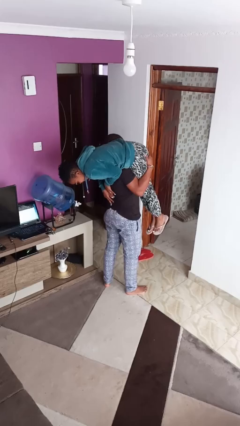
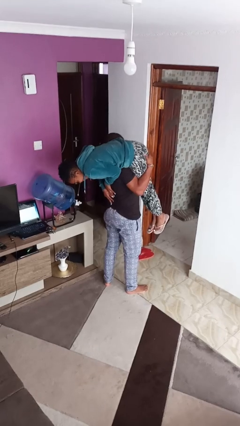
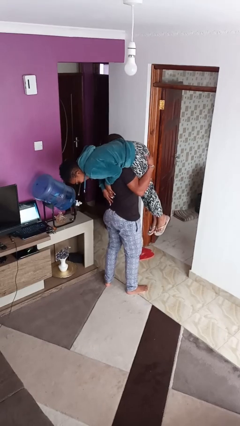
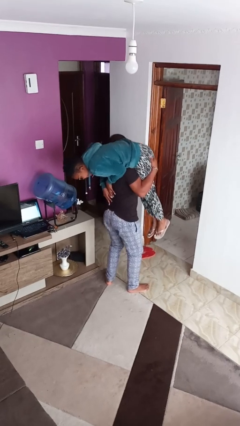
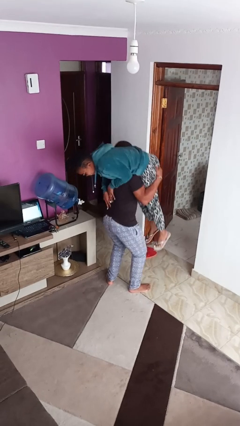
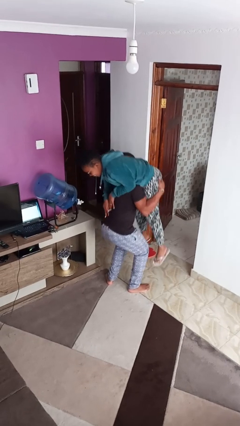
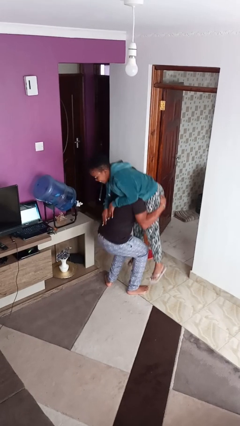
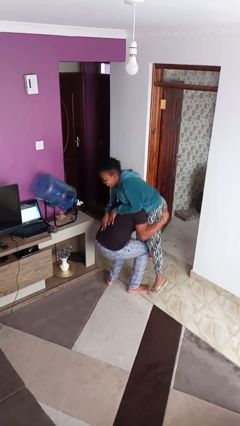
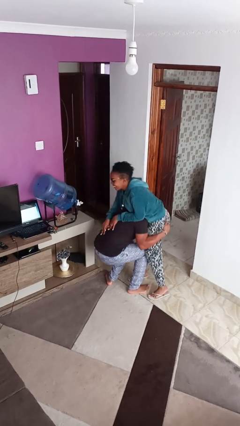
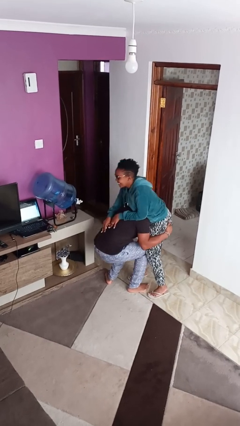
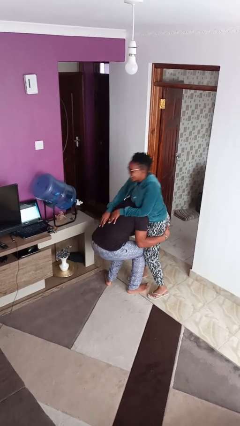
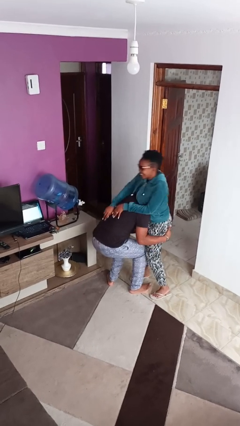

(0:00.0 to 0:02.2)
person puts down person

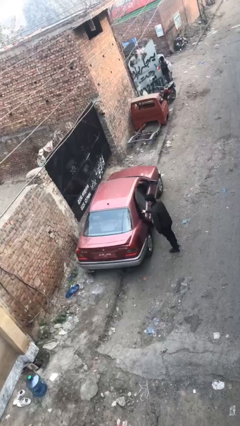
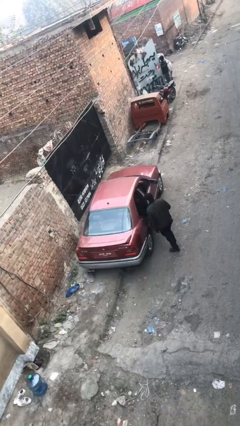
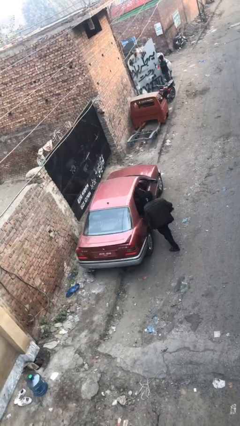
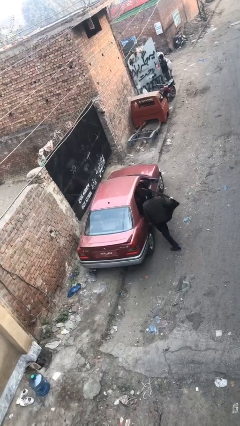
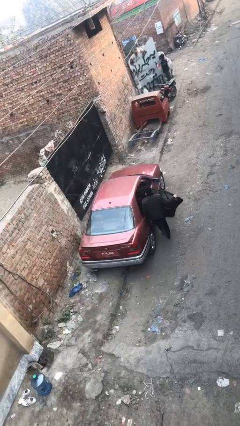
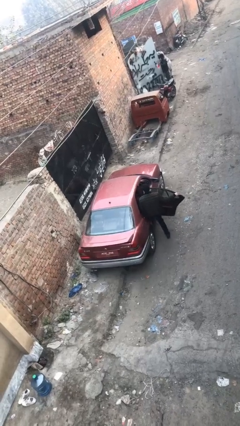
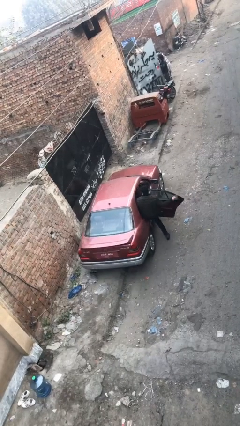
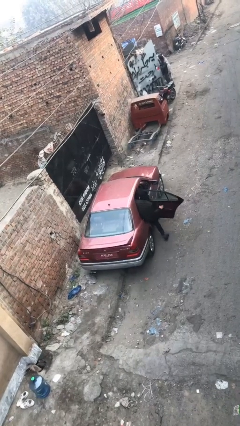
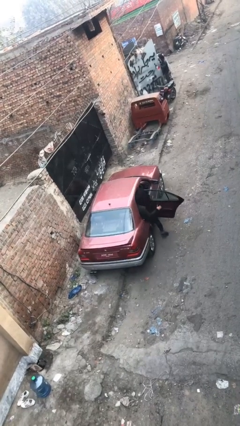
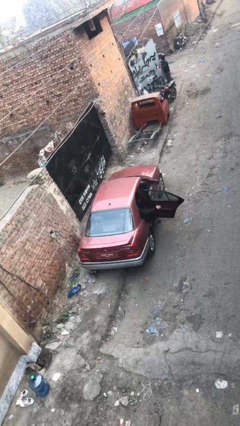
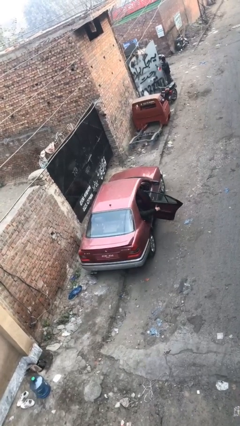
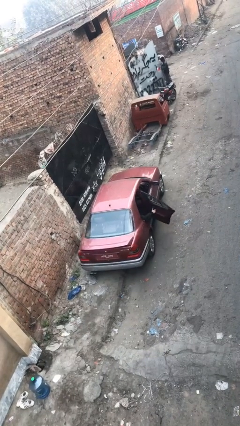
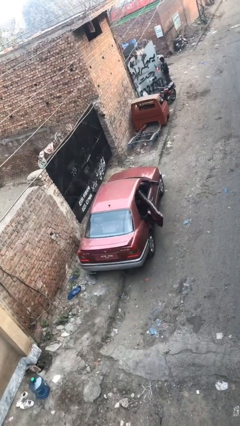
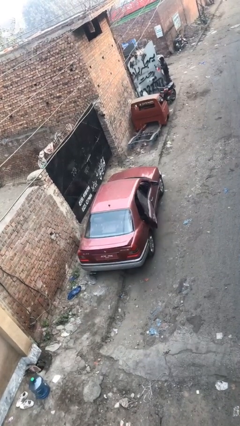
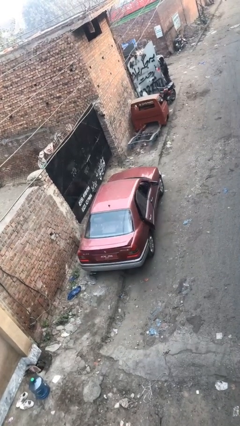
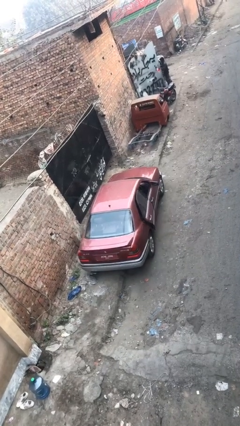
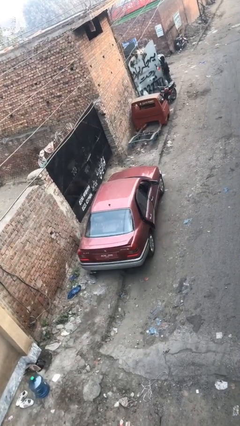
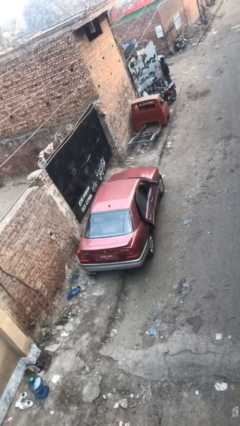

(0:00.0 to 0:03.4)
car picks up person

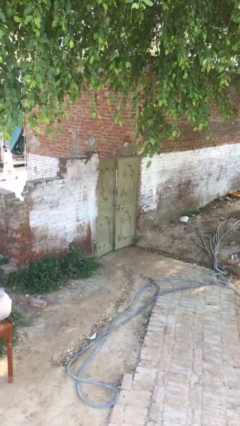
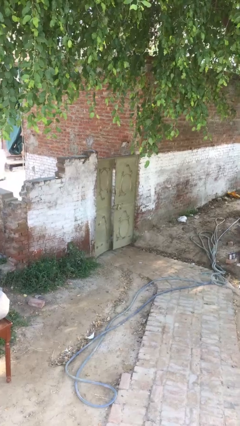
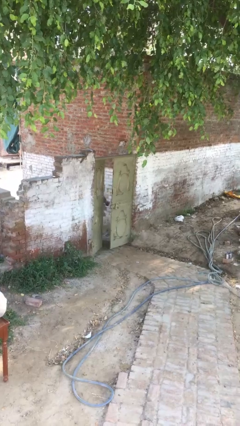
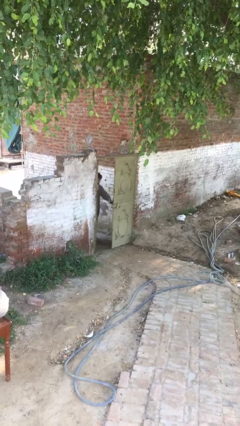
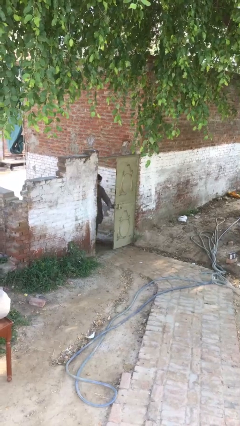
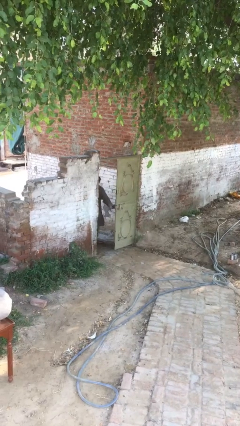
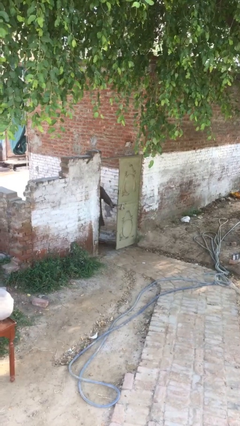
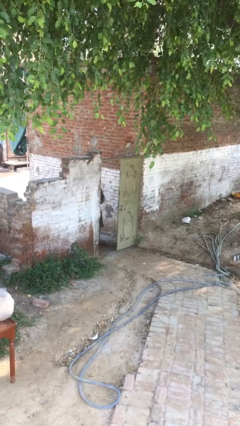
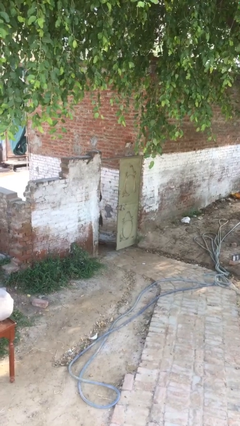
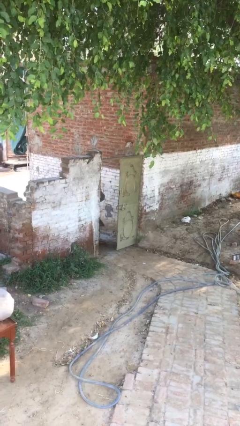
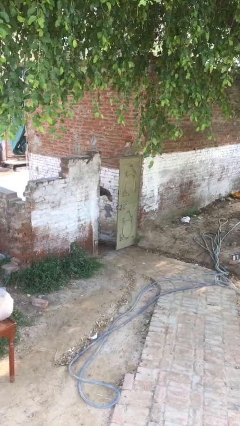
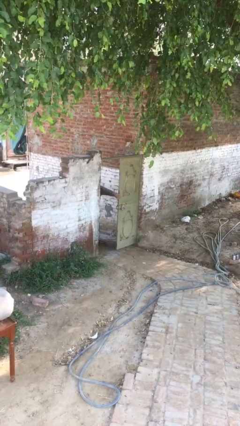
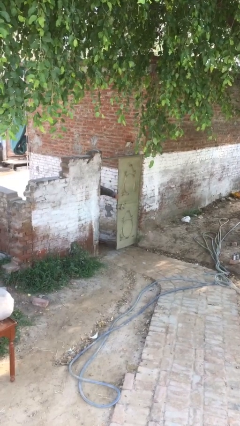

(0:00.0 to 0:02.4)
person opens facility door

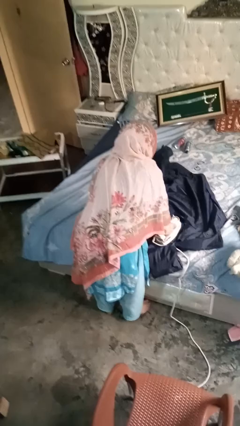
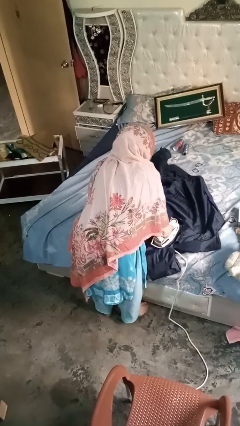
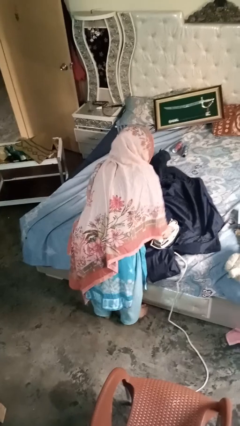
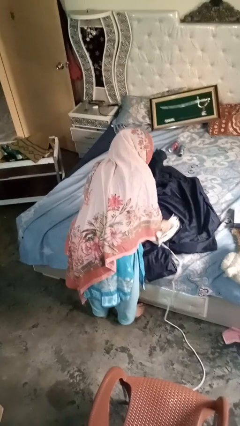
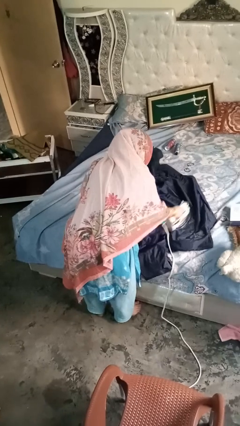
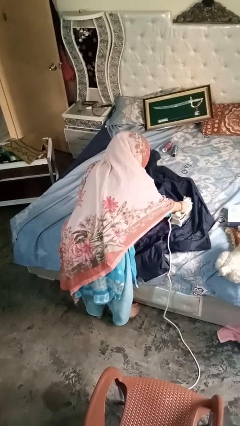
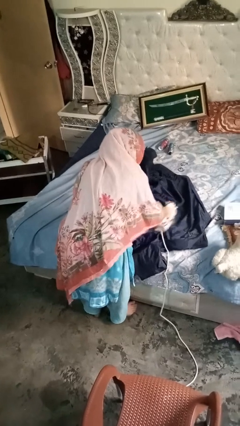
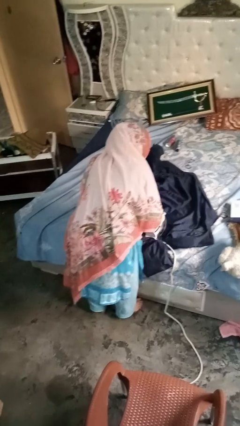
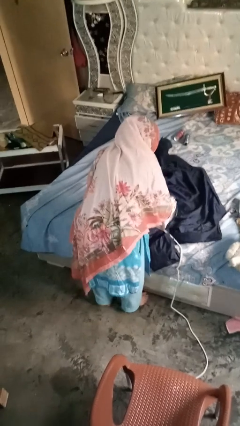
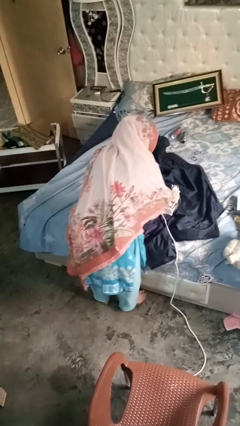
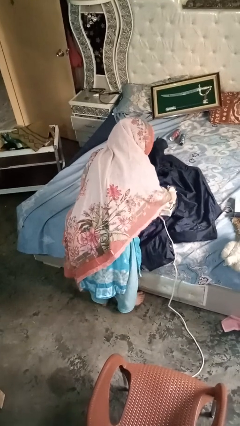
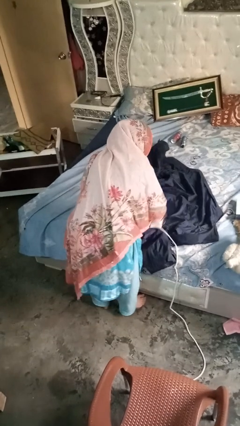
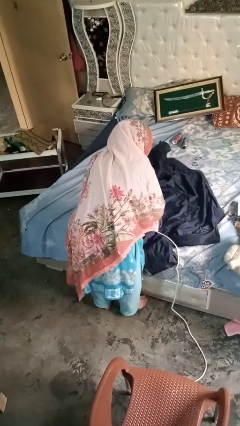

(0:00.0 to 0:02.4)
person irons clothes

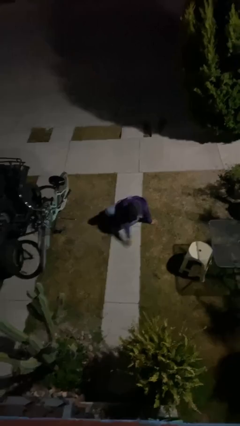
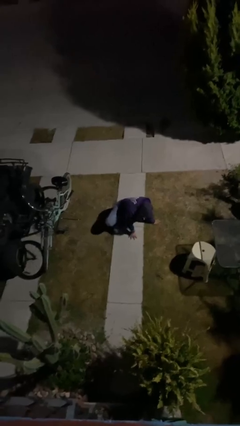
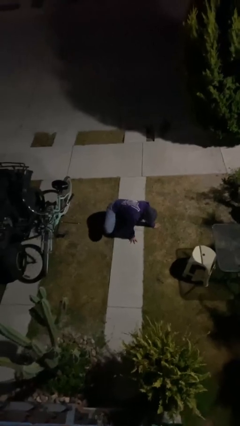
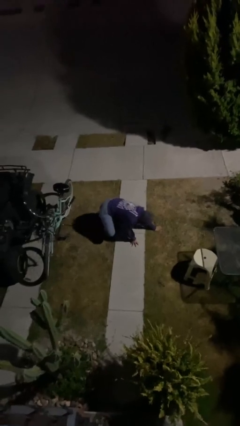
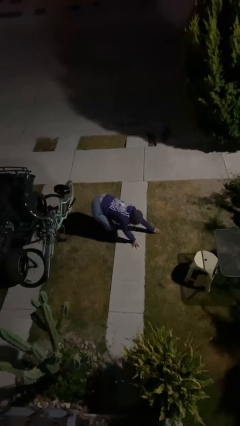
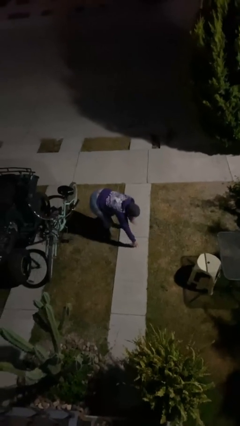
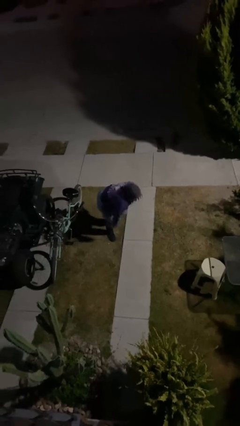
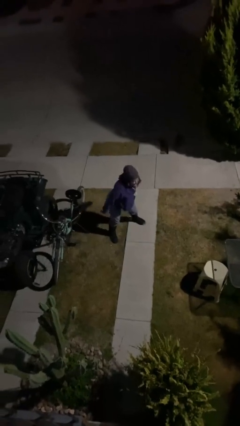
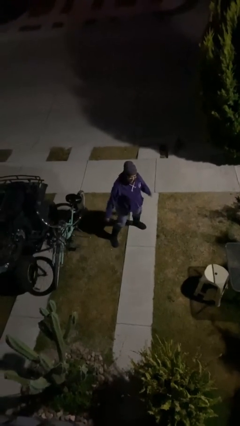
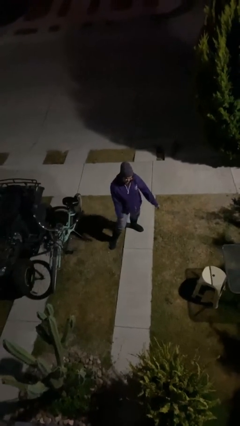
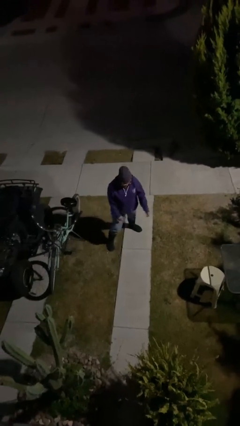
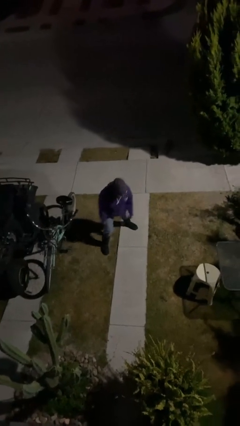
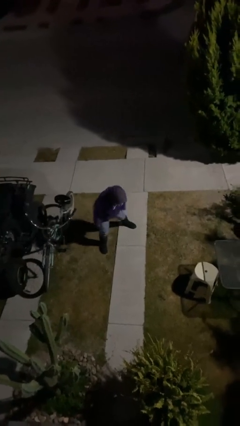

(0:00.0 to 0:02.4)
person stands up

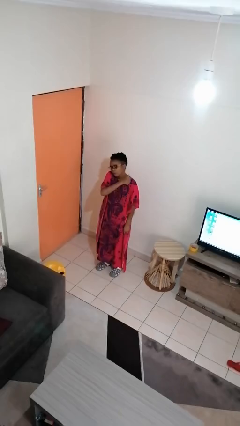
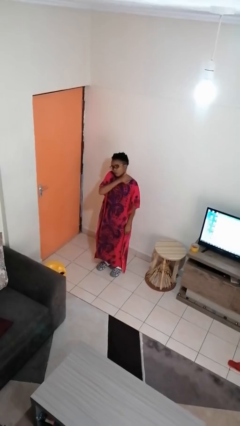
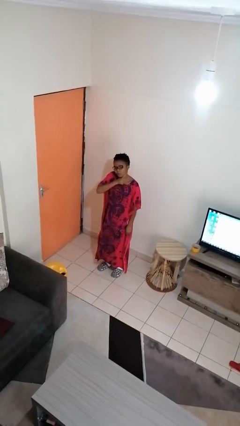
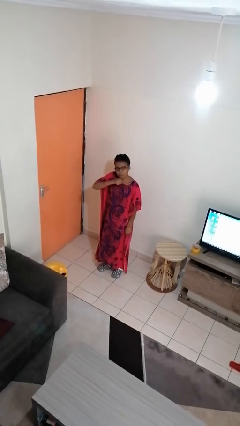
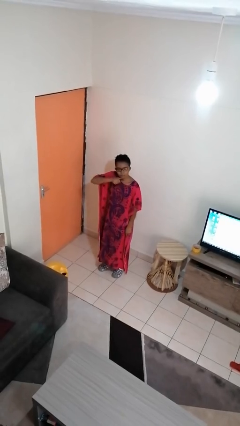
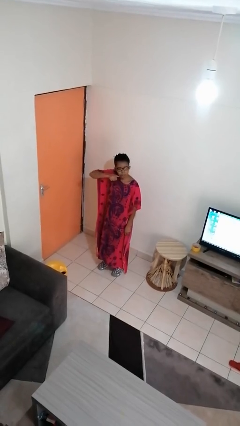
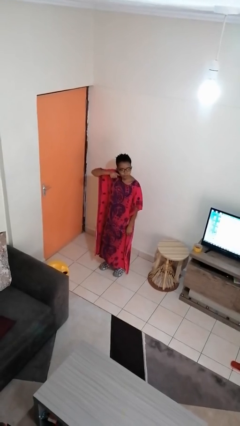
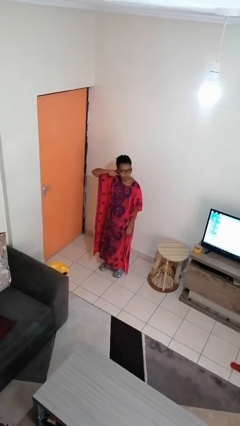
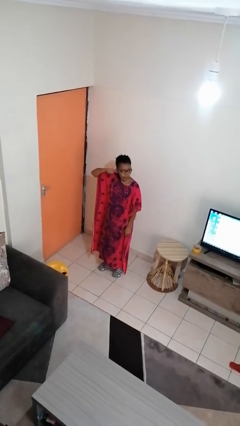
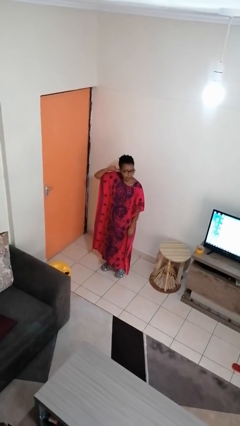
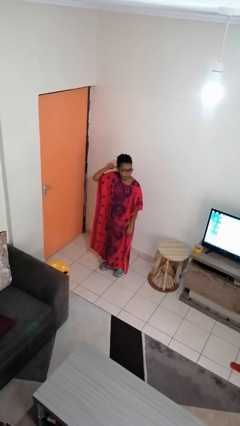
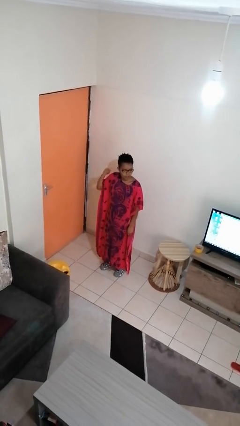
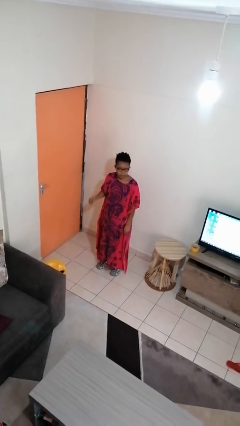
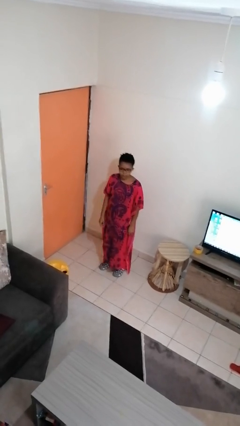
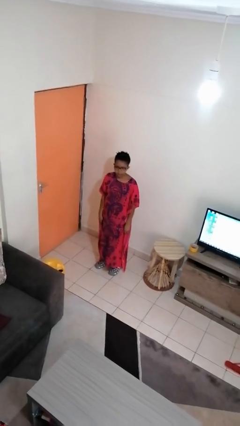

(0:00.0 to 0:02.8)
person gestures cut

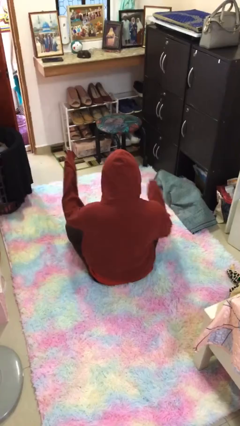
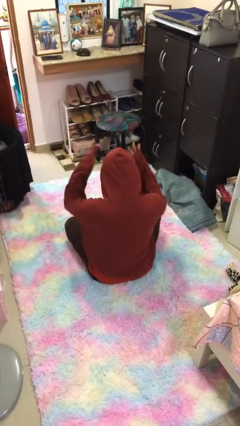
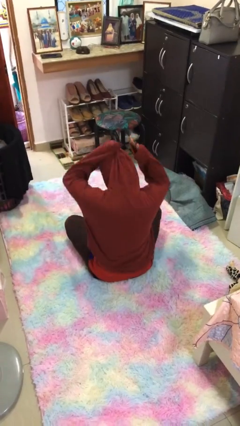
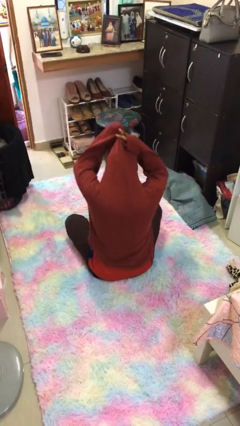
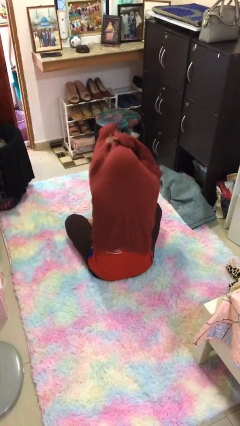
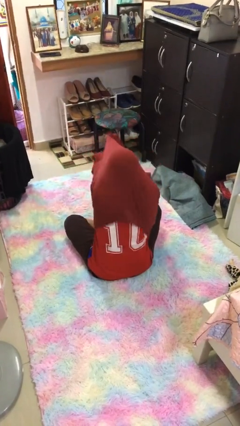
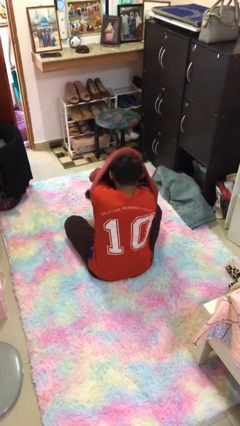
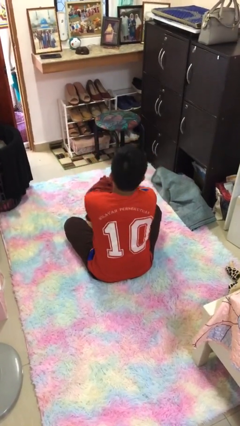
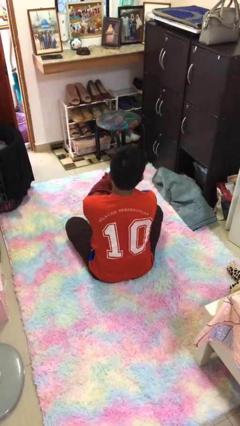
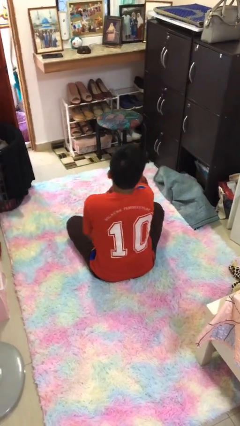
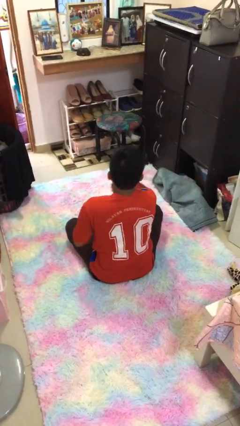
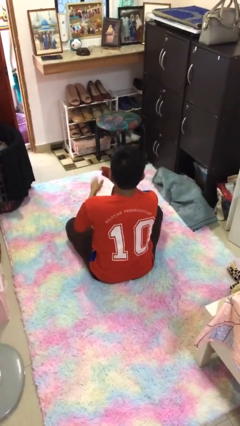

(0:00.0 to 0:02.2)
person takes off hoodie
